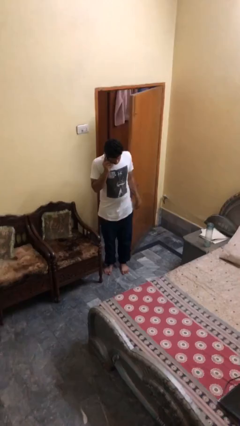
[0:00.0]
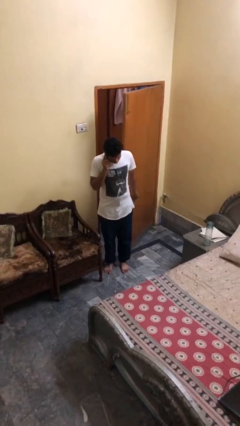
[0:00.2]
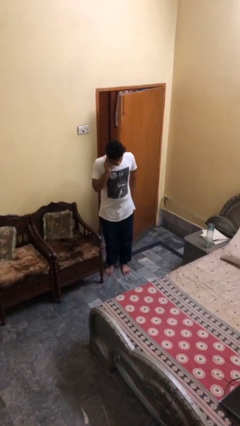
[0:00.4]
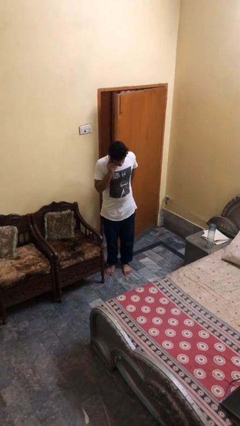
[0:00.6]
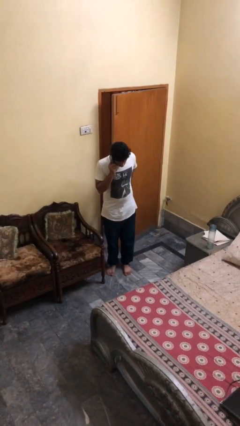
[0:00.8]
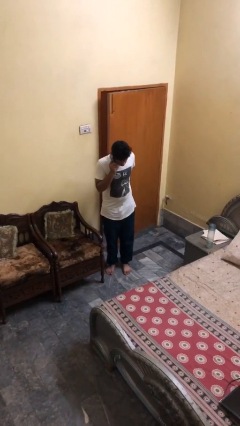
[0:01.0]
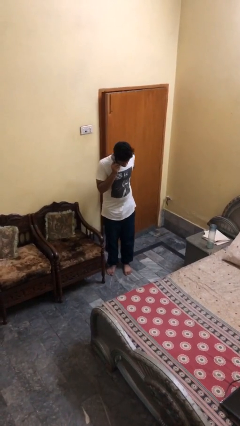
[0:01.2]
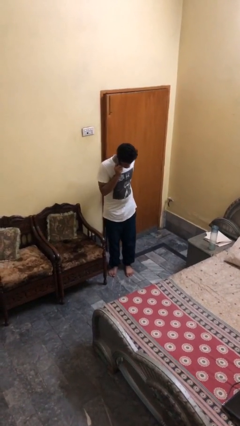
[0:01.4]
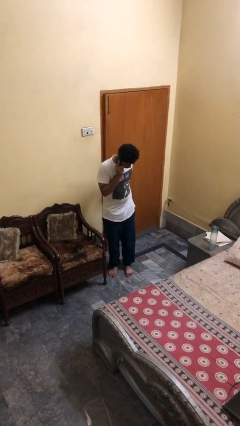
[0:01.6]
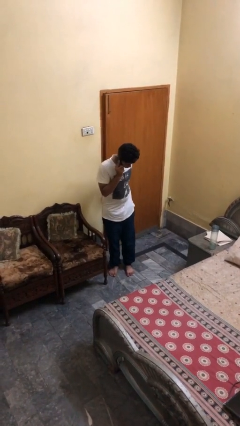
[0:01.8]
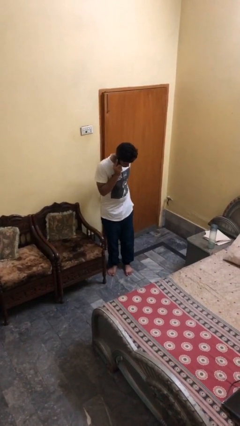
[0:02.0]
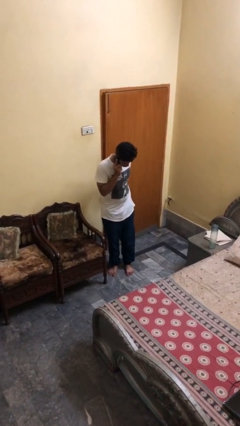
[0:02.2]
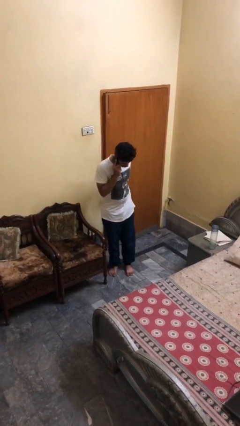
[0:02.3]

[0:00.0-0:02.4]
person closes facility door

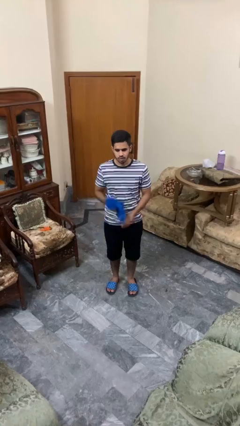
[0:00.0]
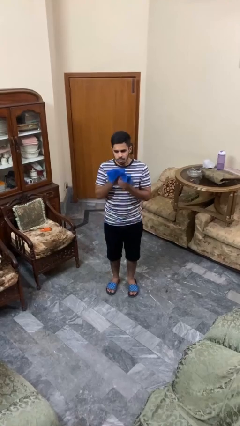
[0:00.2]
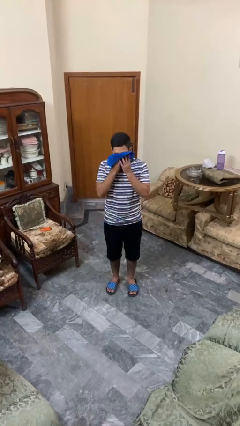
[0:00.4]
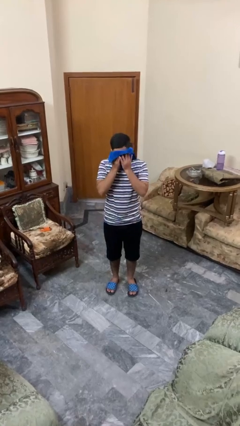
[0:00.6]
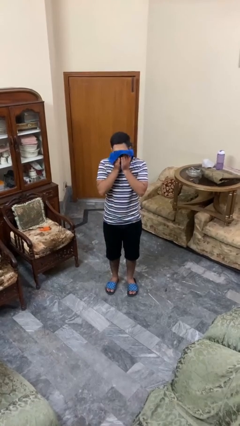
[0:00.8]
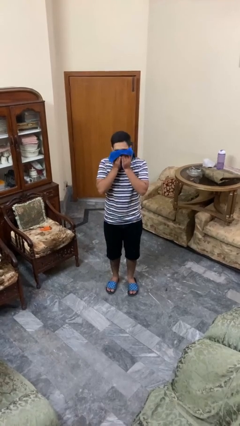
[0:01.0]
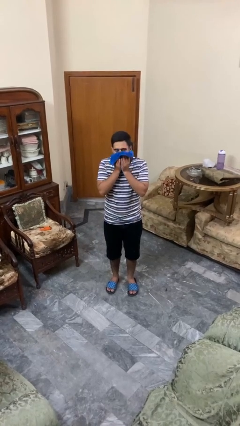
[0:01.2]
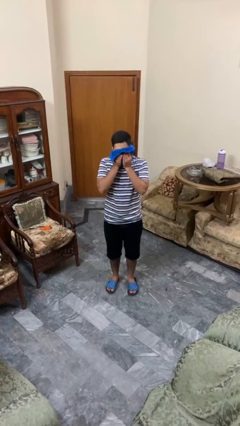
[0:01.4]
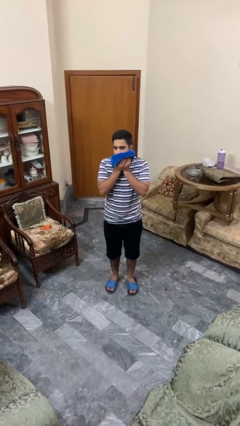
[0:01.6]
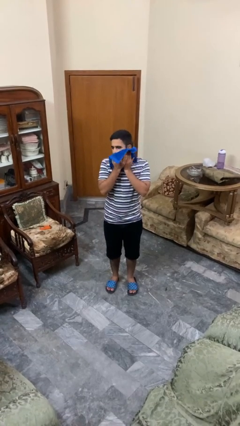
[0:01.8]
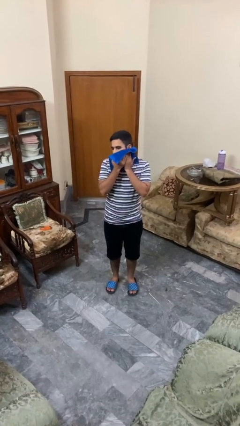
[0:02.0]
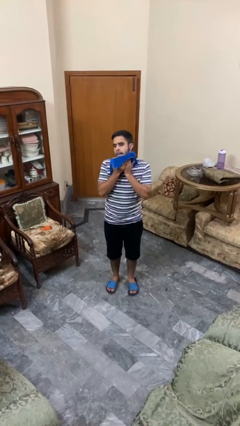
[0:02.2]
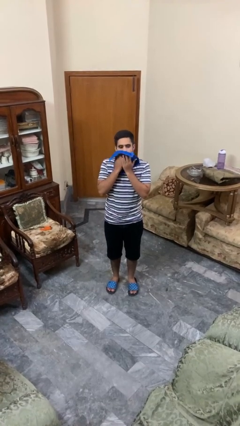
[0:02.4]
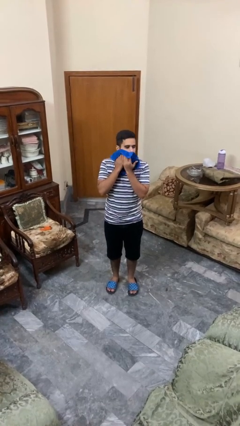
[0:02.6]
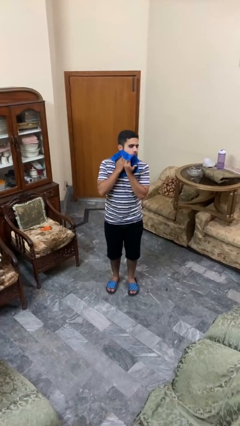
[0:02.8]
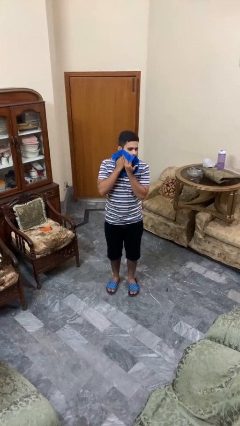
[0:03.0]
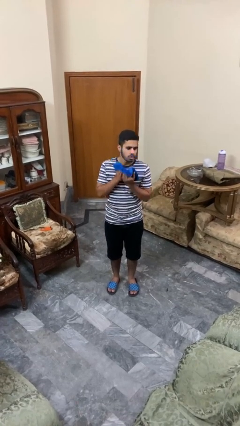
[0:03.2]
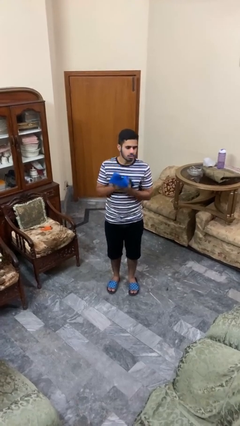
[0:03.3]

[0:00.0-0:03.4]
person wipes mouth with napkin

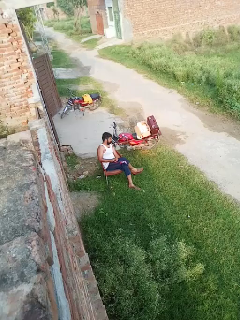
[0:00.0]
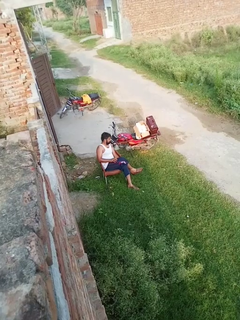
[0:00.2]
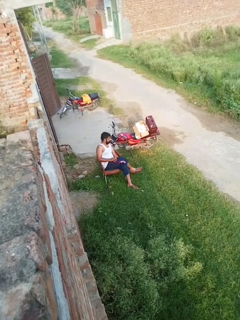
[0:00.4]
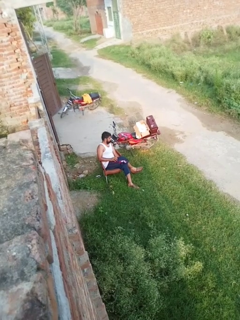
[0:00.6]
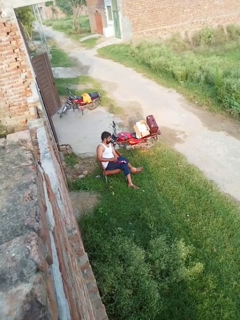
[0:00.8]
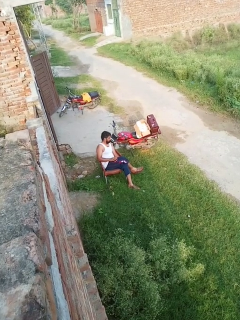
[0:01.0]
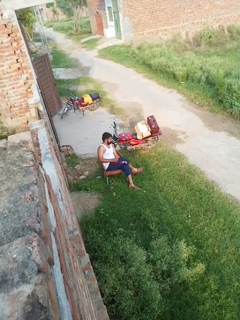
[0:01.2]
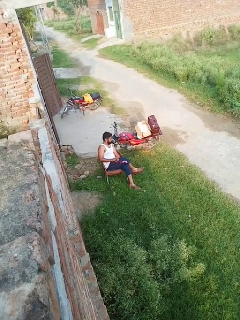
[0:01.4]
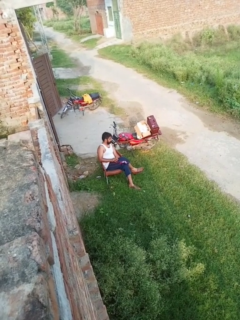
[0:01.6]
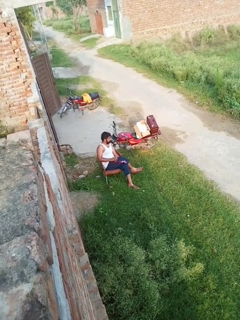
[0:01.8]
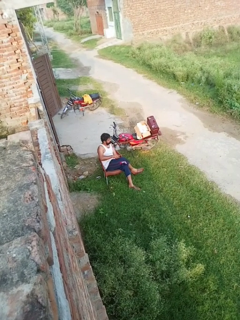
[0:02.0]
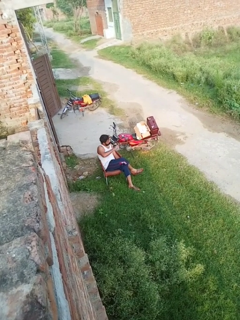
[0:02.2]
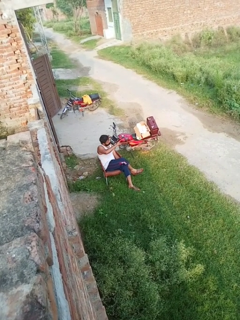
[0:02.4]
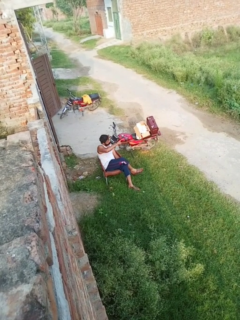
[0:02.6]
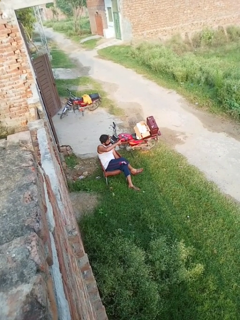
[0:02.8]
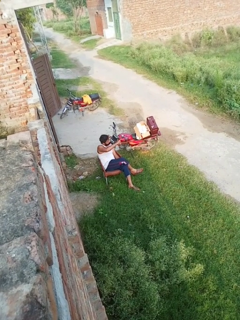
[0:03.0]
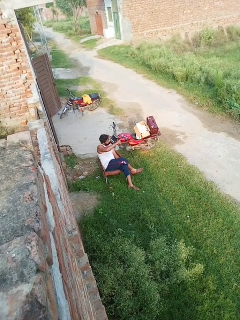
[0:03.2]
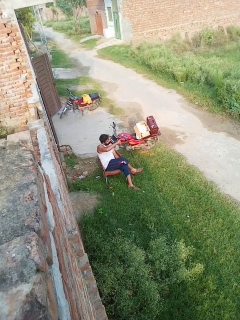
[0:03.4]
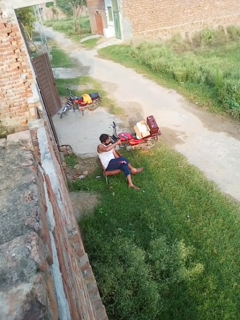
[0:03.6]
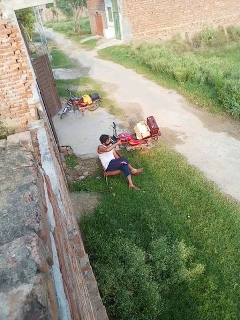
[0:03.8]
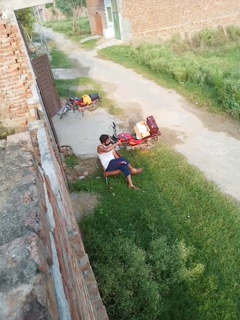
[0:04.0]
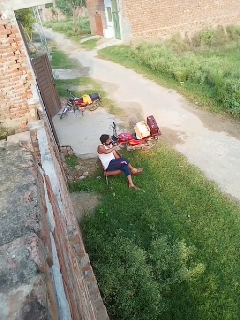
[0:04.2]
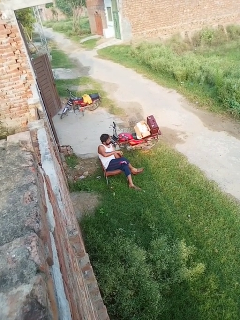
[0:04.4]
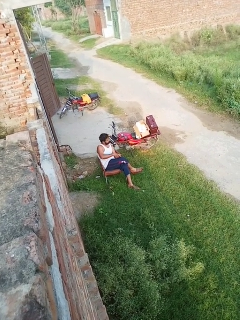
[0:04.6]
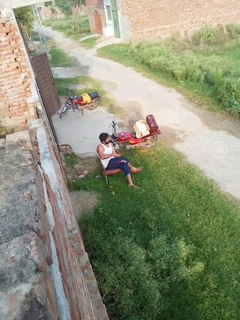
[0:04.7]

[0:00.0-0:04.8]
person points at person

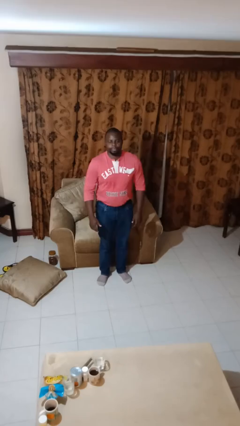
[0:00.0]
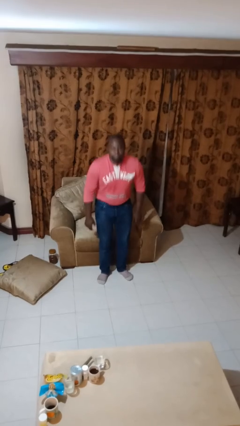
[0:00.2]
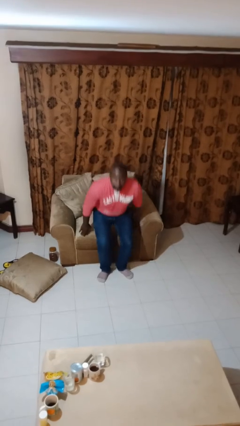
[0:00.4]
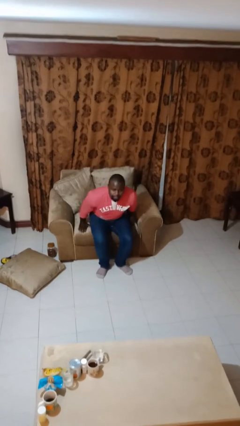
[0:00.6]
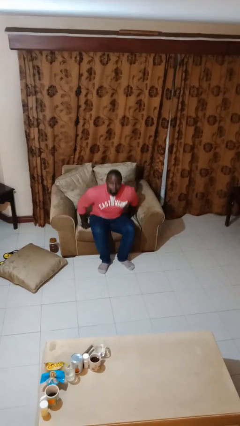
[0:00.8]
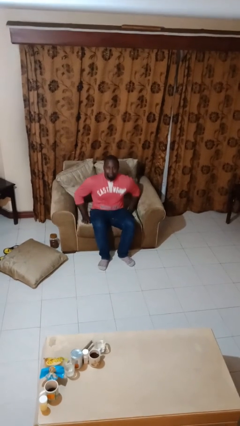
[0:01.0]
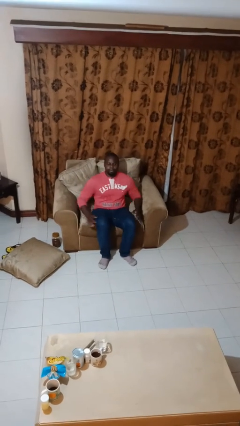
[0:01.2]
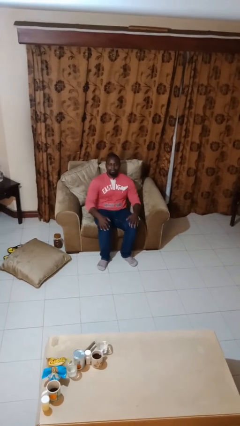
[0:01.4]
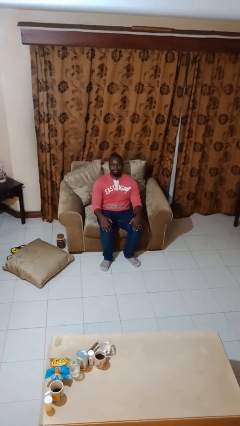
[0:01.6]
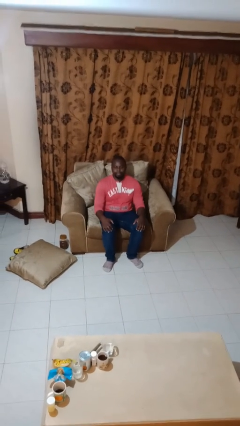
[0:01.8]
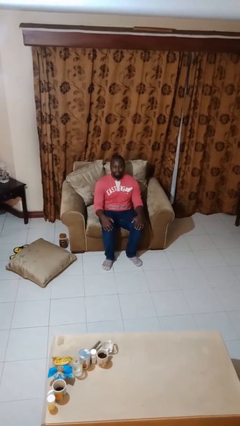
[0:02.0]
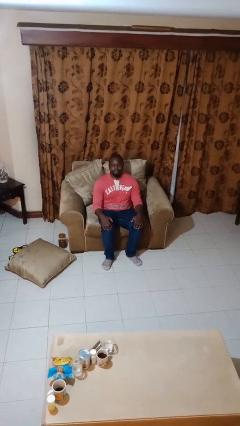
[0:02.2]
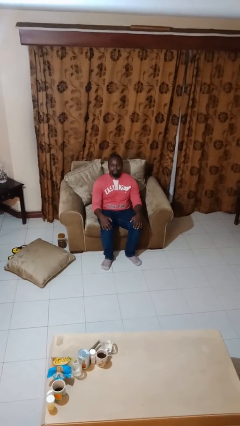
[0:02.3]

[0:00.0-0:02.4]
person sits down

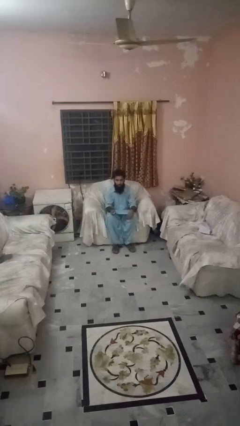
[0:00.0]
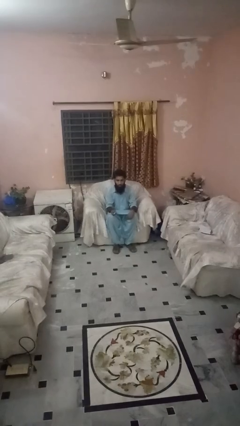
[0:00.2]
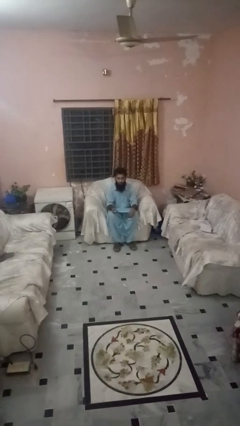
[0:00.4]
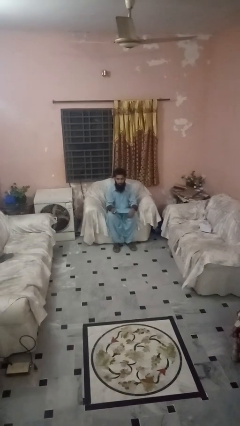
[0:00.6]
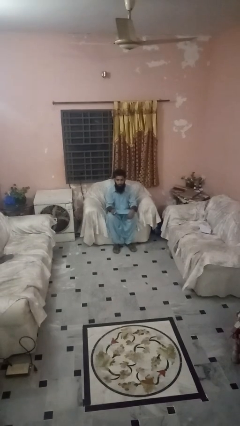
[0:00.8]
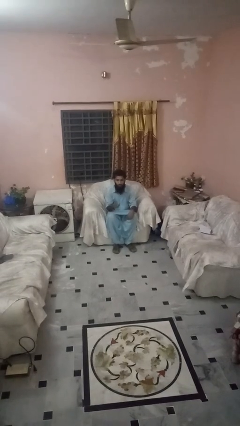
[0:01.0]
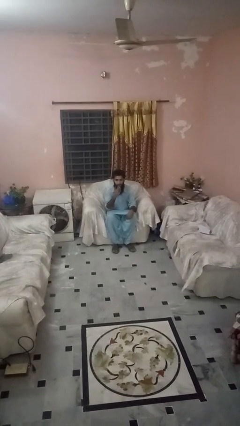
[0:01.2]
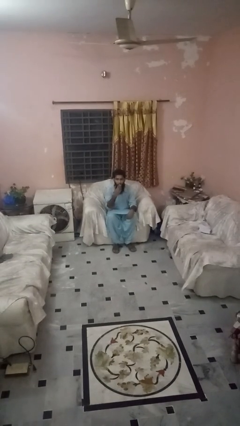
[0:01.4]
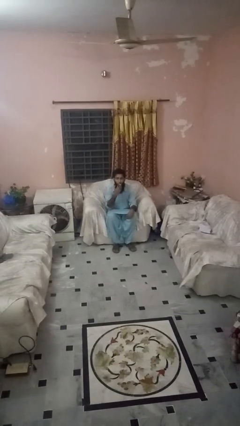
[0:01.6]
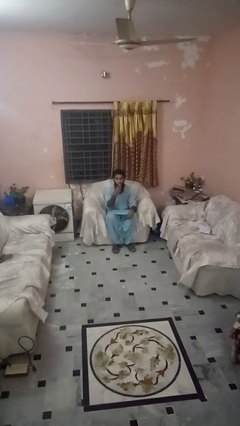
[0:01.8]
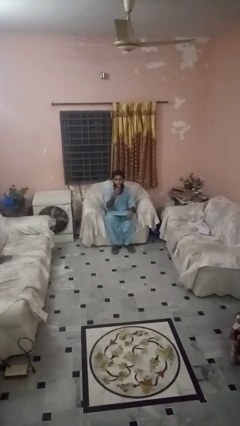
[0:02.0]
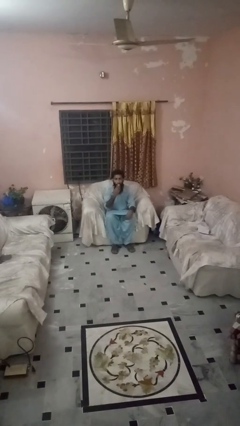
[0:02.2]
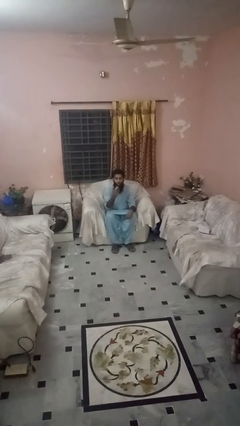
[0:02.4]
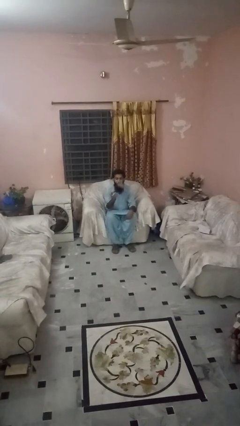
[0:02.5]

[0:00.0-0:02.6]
person vapes

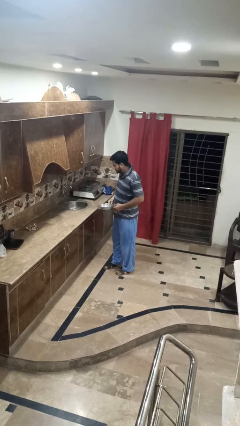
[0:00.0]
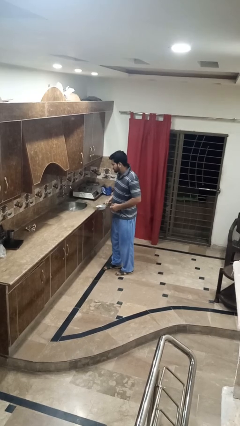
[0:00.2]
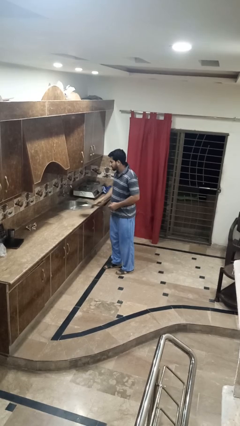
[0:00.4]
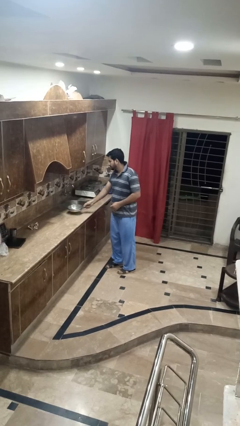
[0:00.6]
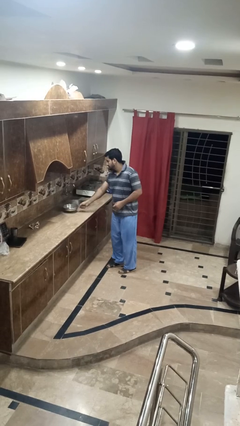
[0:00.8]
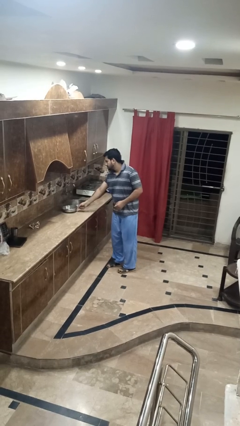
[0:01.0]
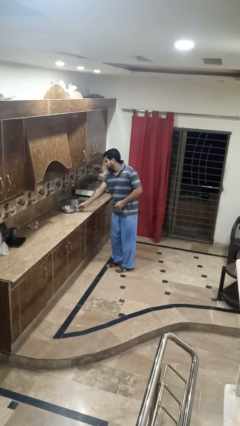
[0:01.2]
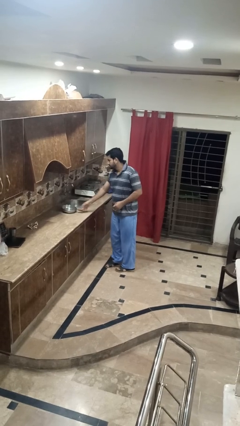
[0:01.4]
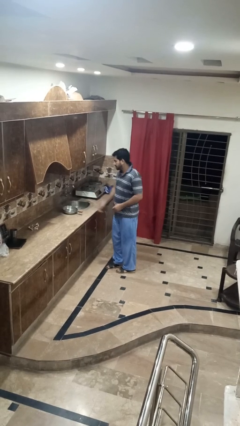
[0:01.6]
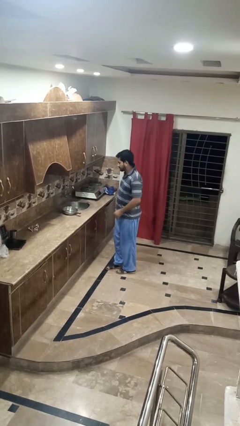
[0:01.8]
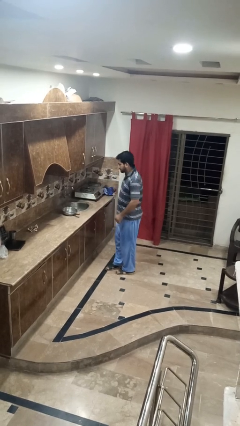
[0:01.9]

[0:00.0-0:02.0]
person puts down object on countertop

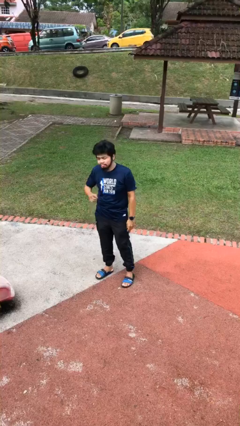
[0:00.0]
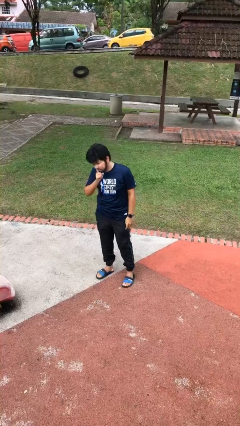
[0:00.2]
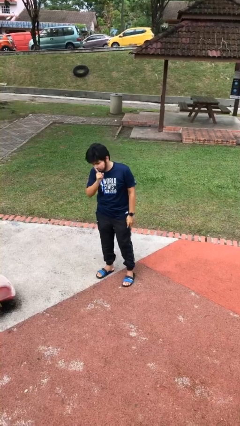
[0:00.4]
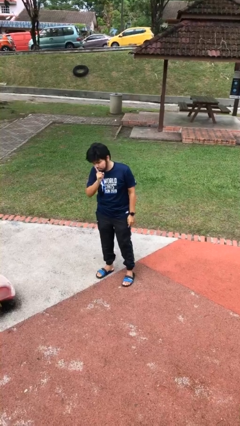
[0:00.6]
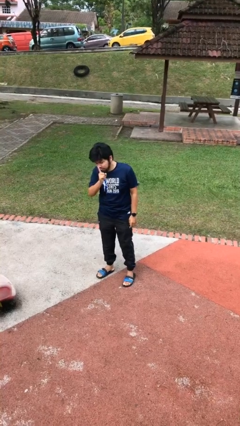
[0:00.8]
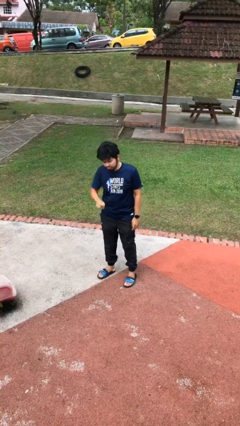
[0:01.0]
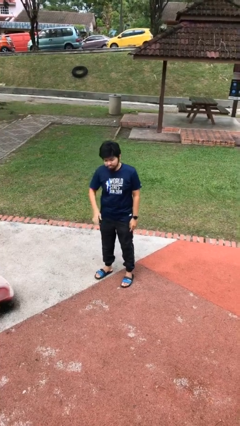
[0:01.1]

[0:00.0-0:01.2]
person gestures be quiet
